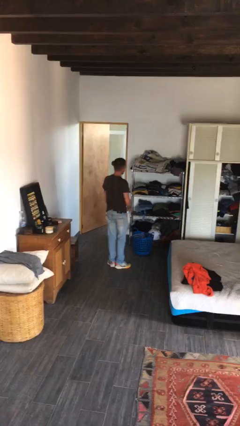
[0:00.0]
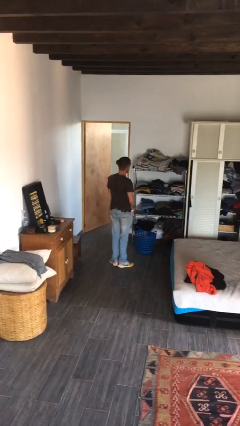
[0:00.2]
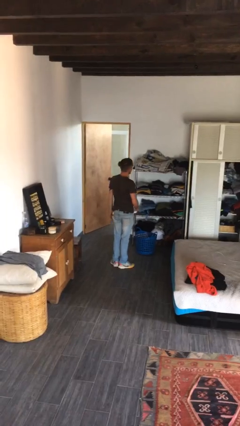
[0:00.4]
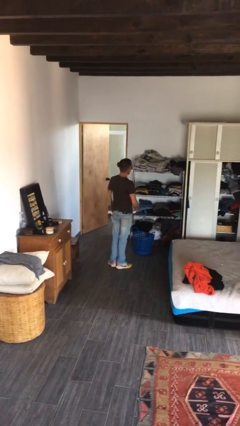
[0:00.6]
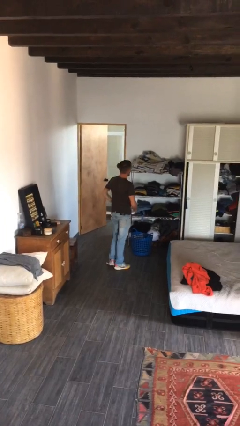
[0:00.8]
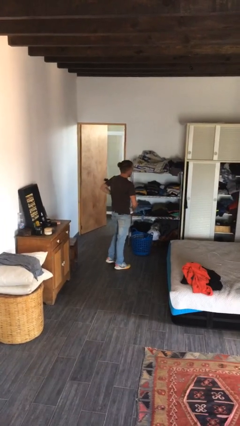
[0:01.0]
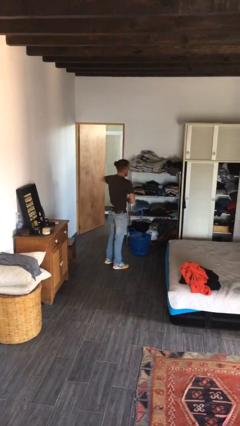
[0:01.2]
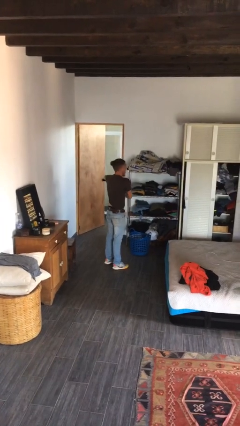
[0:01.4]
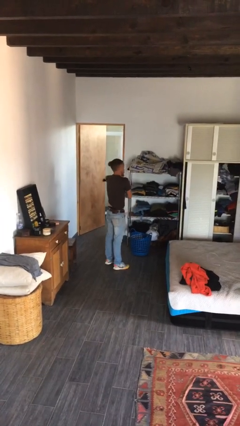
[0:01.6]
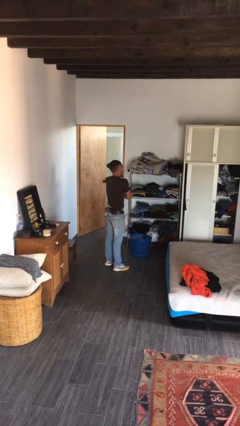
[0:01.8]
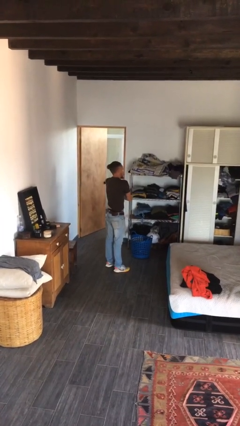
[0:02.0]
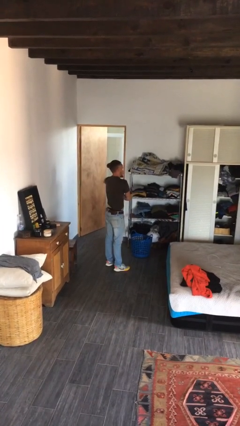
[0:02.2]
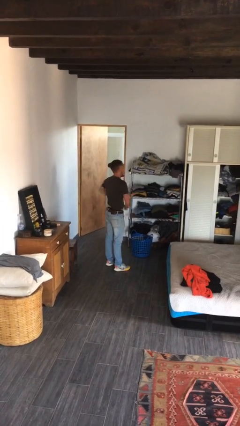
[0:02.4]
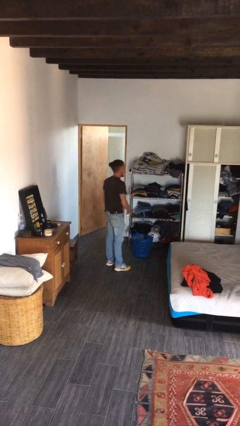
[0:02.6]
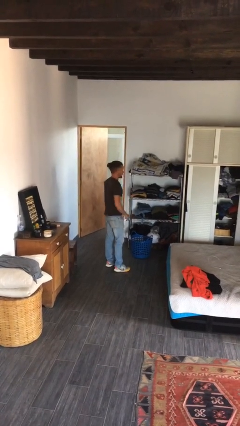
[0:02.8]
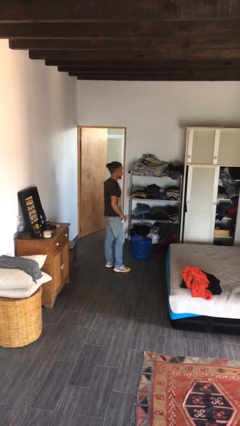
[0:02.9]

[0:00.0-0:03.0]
person applies deodorant

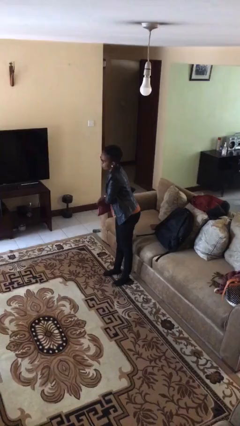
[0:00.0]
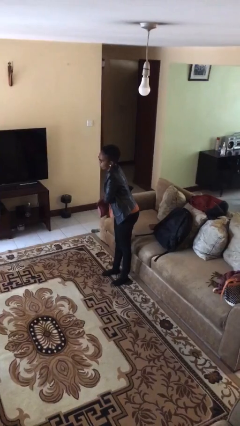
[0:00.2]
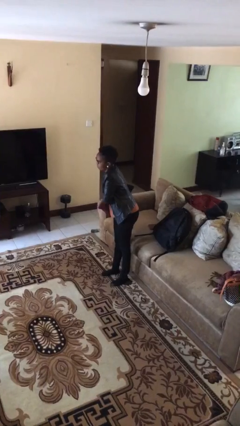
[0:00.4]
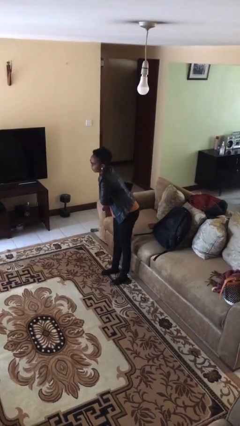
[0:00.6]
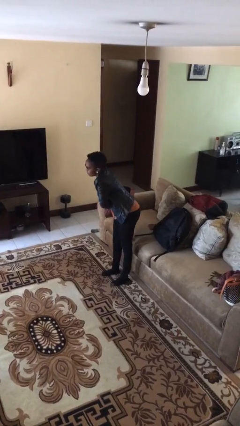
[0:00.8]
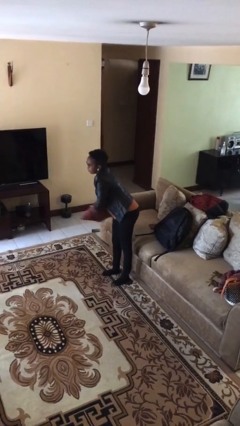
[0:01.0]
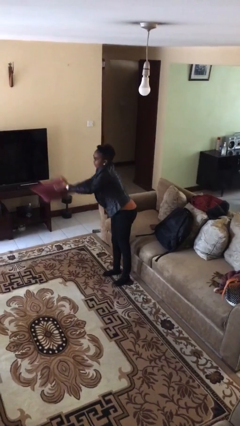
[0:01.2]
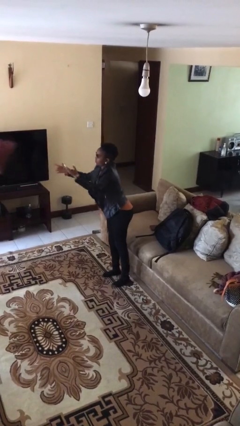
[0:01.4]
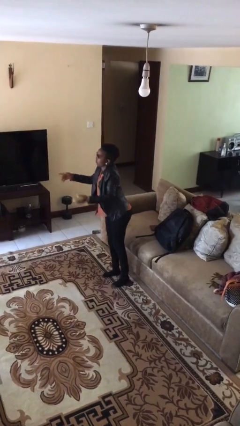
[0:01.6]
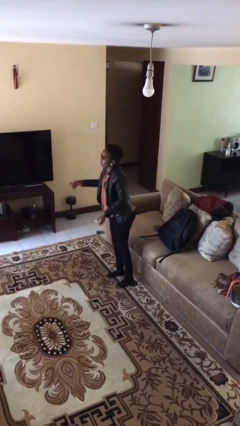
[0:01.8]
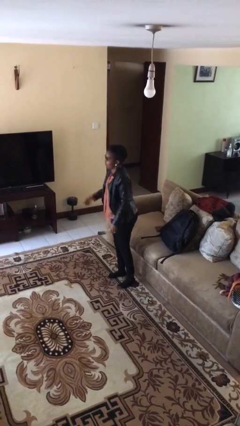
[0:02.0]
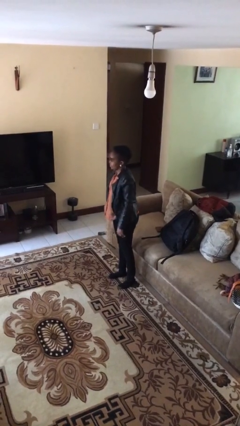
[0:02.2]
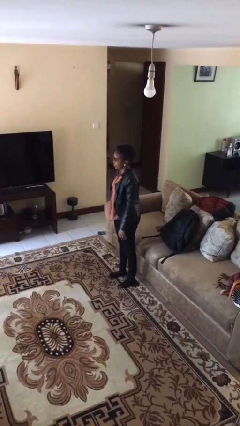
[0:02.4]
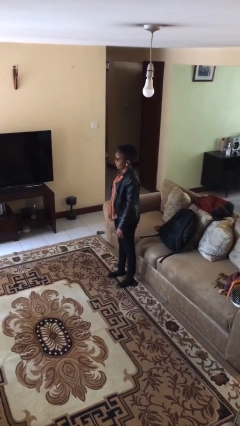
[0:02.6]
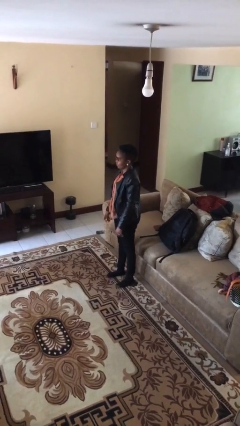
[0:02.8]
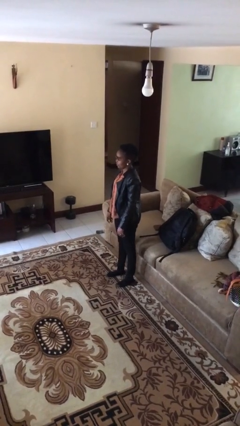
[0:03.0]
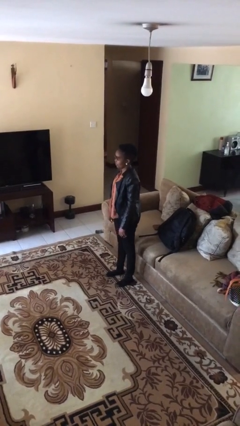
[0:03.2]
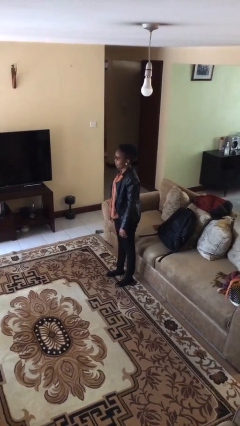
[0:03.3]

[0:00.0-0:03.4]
person throws object to person

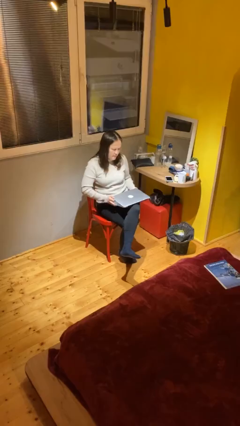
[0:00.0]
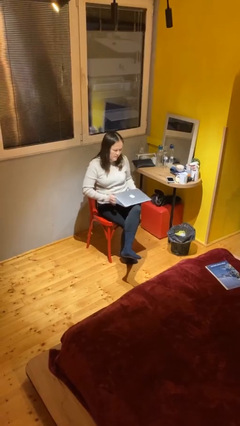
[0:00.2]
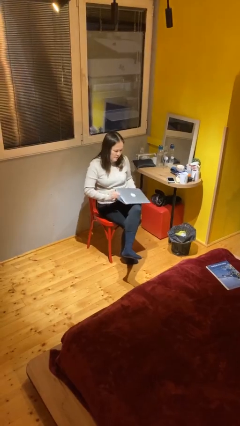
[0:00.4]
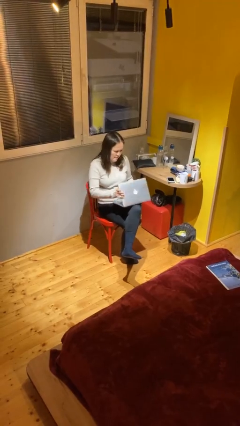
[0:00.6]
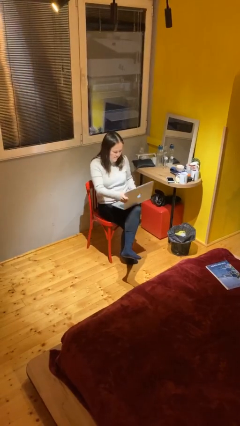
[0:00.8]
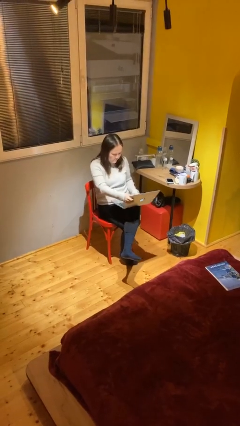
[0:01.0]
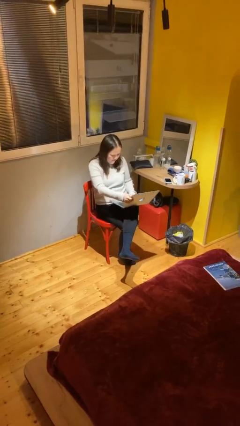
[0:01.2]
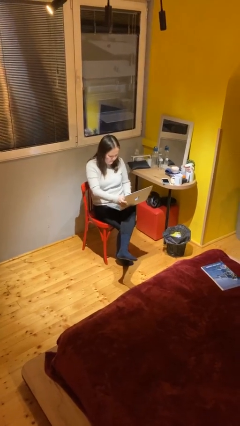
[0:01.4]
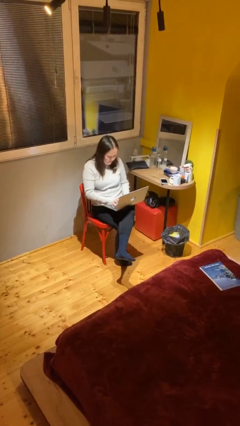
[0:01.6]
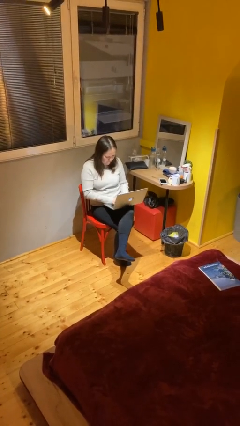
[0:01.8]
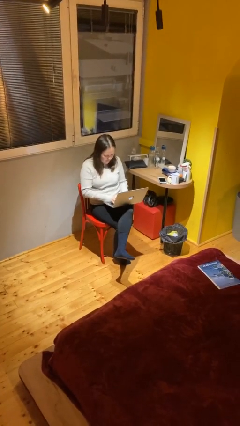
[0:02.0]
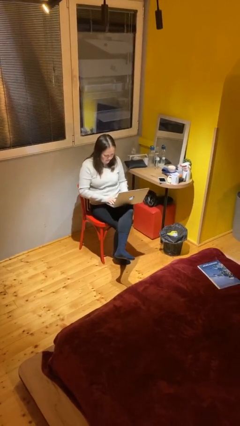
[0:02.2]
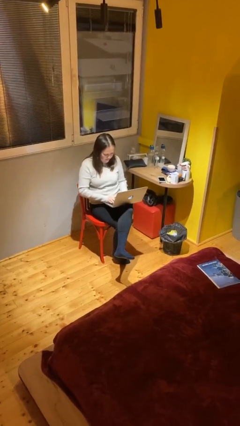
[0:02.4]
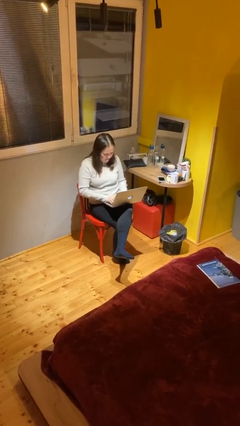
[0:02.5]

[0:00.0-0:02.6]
person interacts with laptop

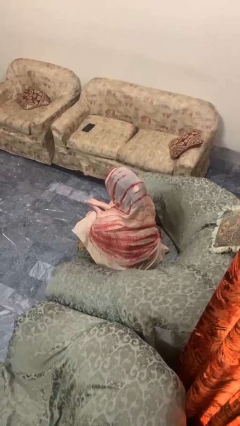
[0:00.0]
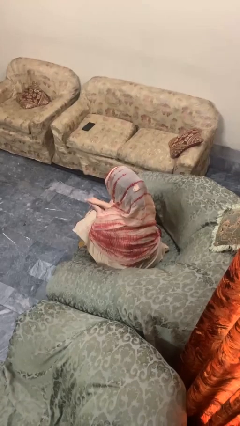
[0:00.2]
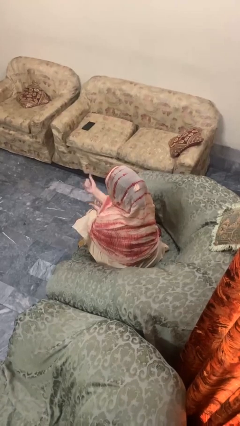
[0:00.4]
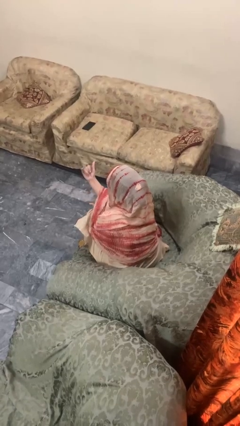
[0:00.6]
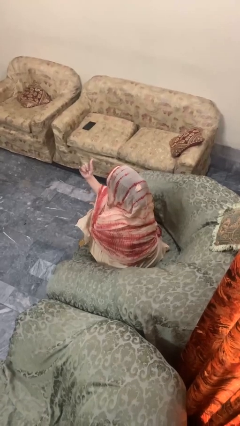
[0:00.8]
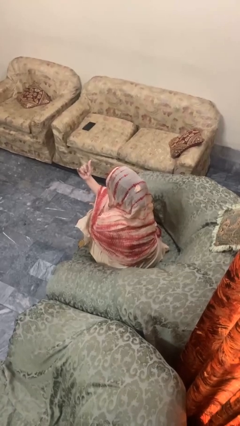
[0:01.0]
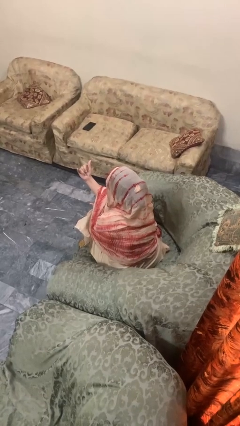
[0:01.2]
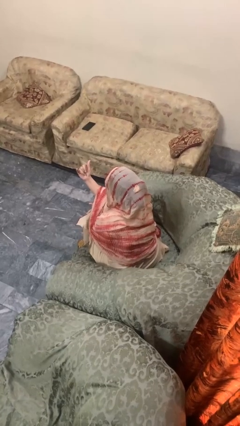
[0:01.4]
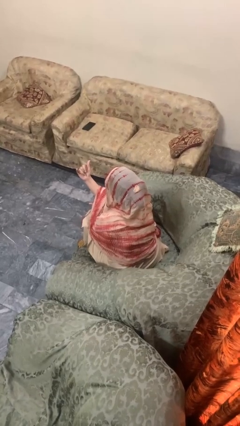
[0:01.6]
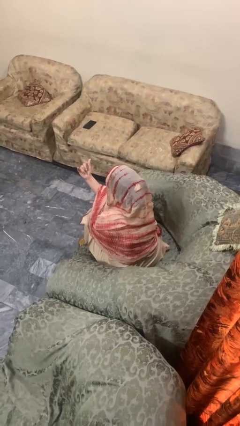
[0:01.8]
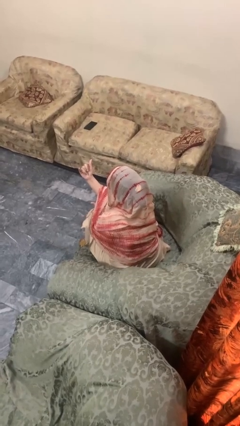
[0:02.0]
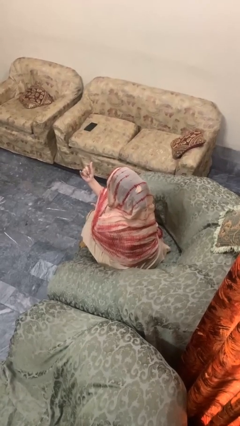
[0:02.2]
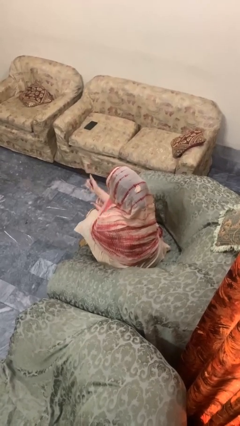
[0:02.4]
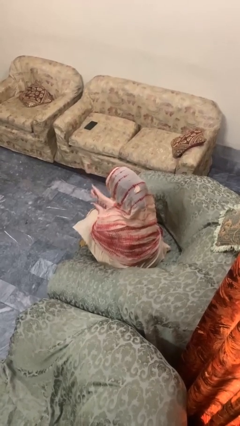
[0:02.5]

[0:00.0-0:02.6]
person gestures hang loose

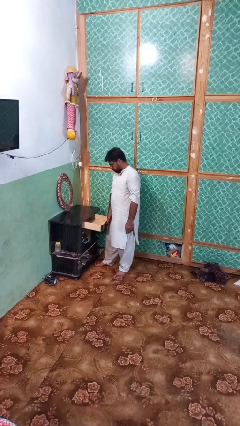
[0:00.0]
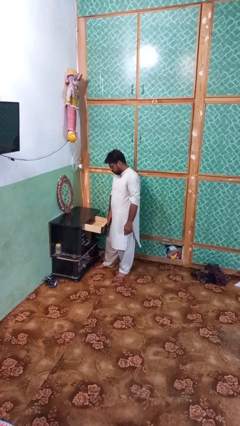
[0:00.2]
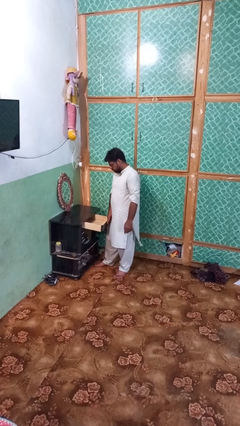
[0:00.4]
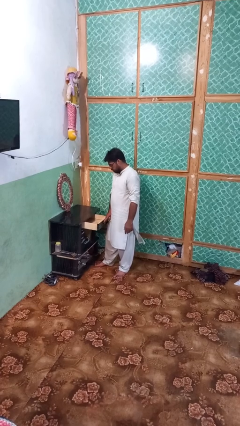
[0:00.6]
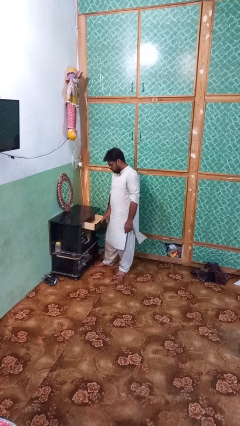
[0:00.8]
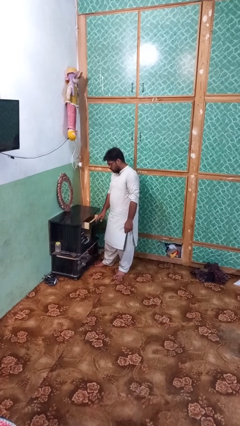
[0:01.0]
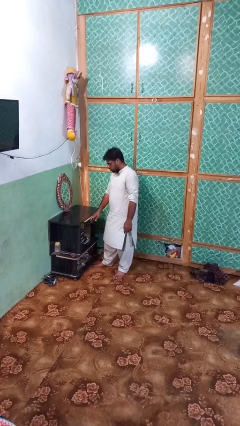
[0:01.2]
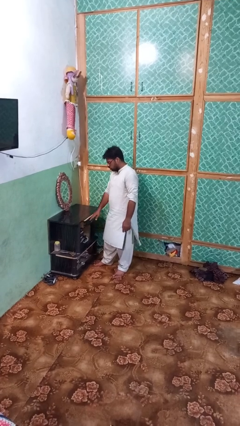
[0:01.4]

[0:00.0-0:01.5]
person closes dresser drawer

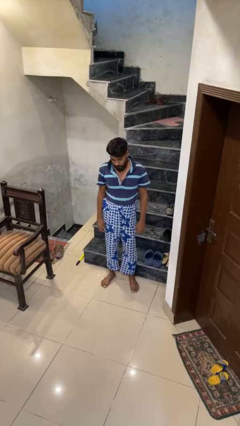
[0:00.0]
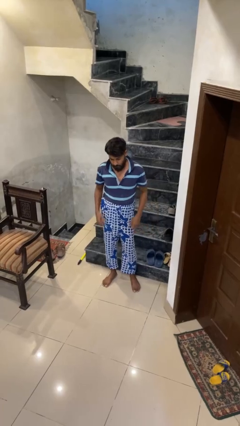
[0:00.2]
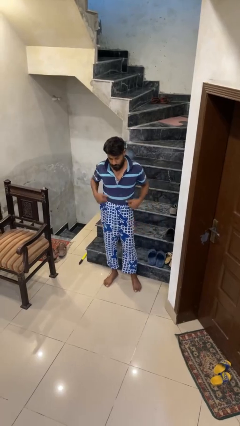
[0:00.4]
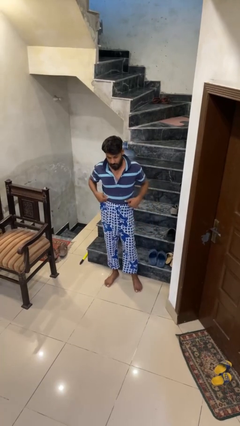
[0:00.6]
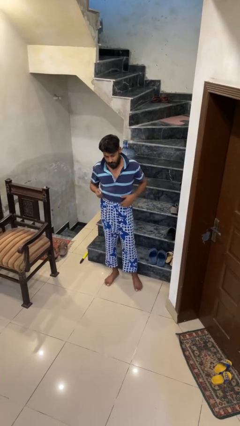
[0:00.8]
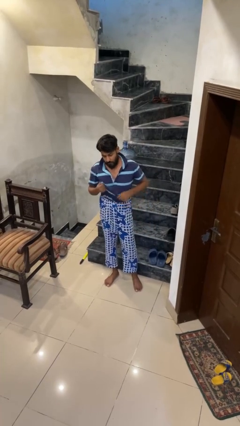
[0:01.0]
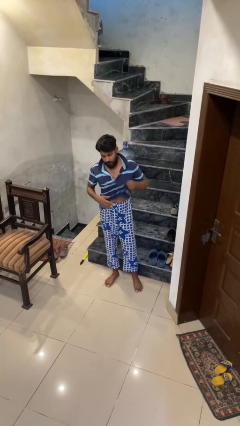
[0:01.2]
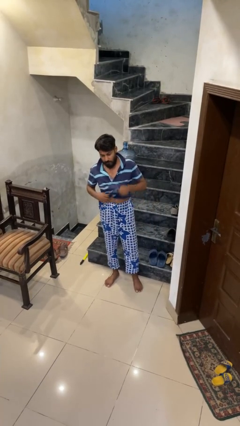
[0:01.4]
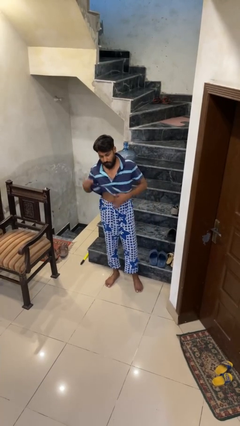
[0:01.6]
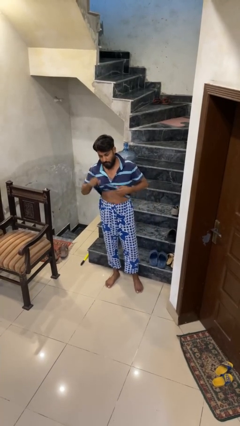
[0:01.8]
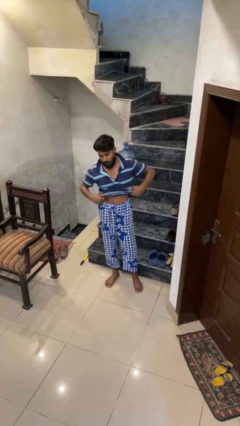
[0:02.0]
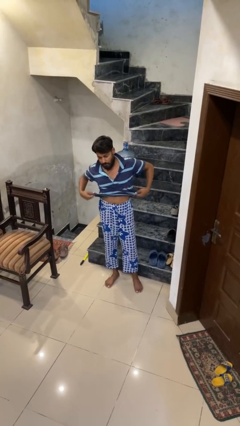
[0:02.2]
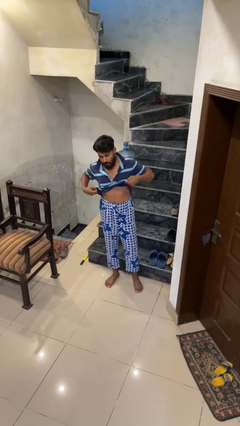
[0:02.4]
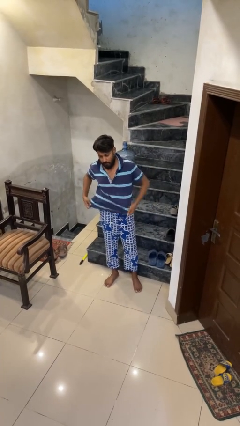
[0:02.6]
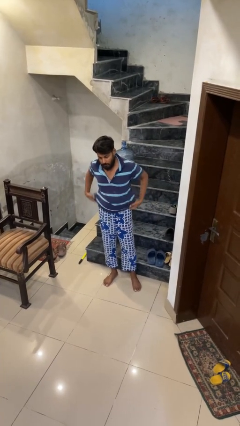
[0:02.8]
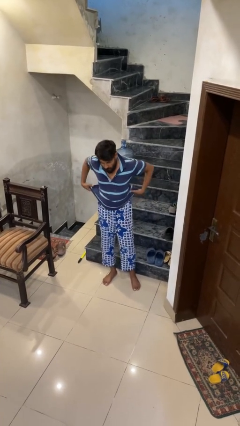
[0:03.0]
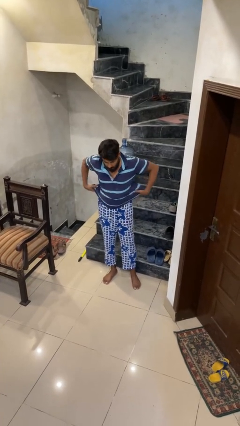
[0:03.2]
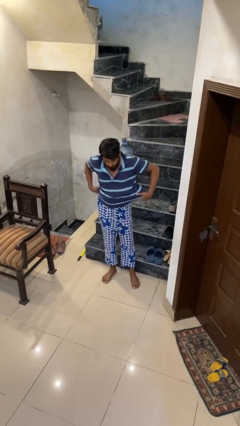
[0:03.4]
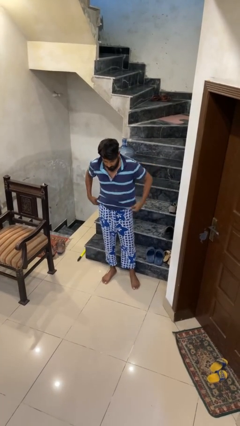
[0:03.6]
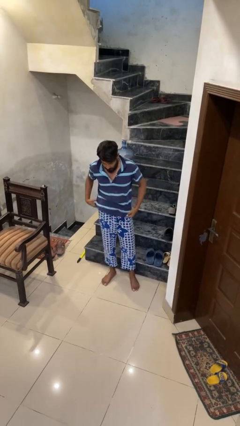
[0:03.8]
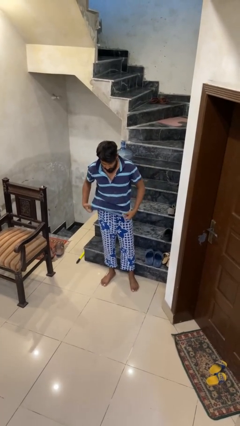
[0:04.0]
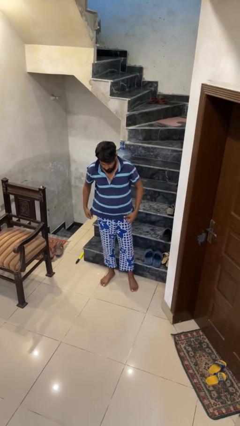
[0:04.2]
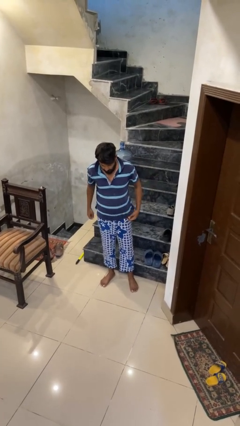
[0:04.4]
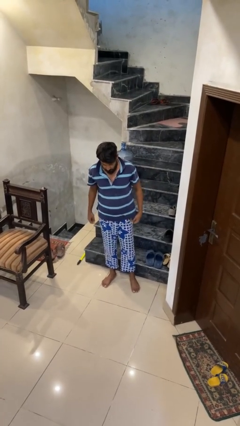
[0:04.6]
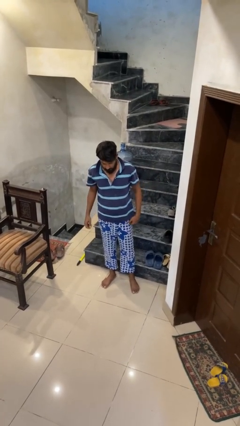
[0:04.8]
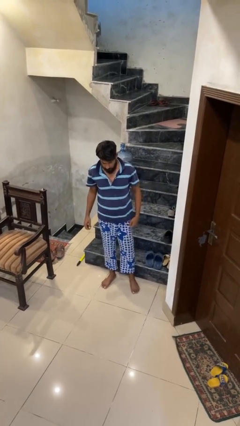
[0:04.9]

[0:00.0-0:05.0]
person untucks shirt
